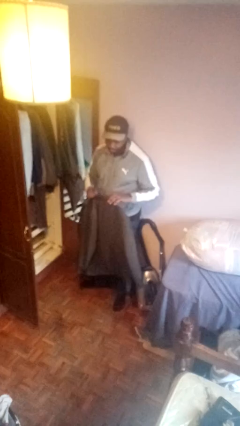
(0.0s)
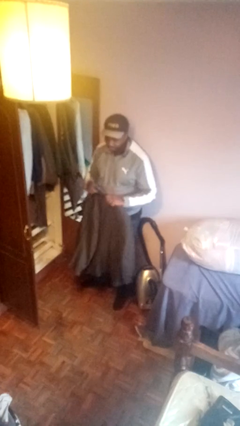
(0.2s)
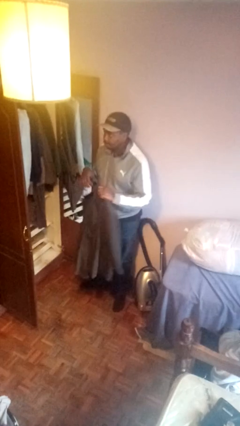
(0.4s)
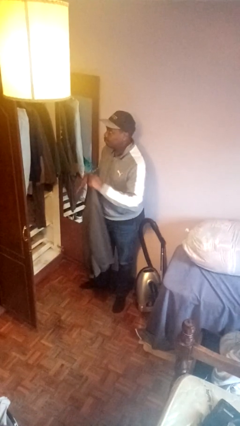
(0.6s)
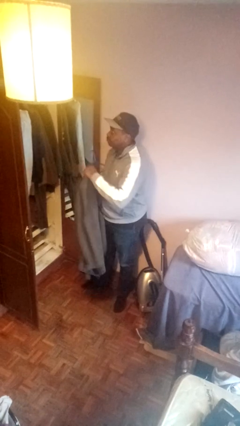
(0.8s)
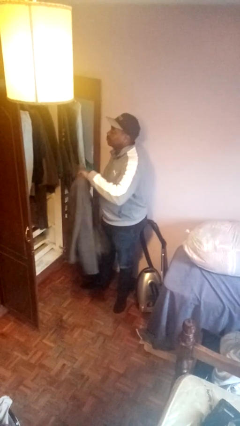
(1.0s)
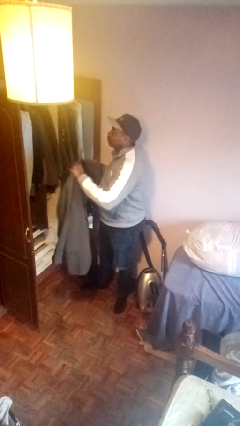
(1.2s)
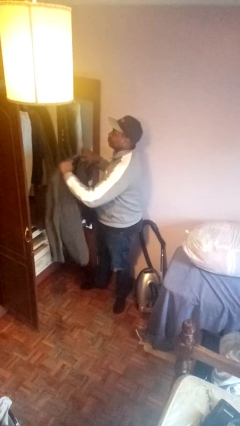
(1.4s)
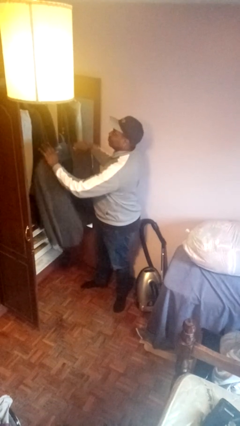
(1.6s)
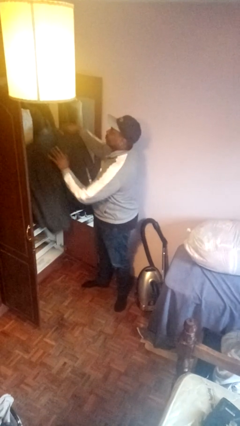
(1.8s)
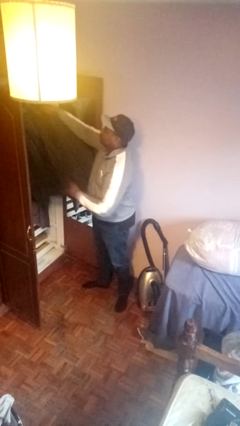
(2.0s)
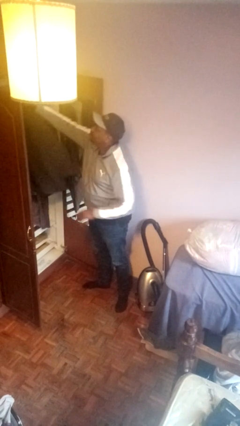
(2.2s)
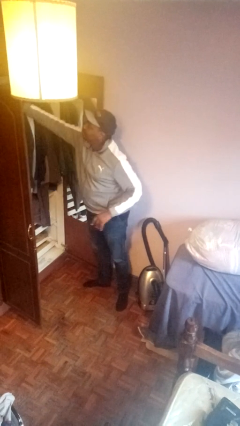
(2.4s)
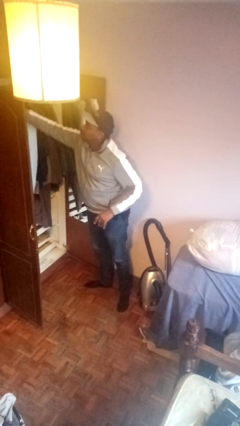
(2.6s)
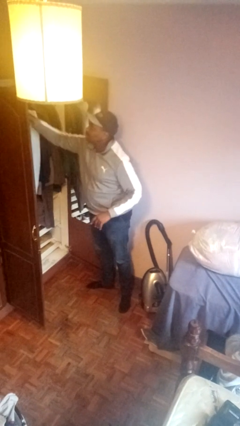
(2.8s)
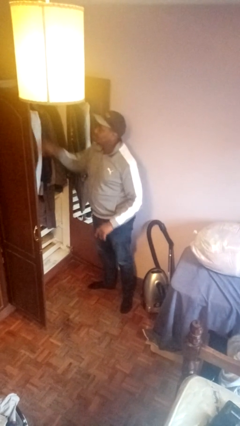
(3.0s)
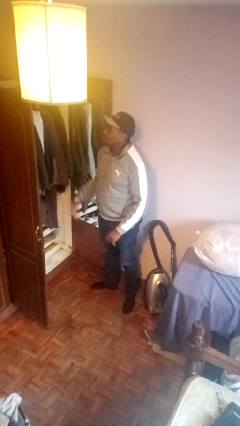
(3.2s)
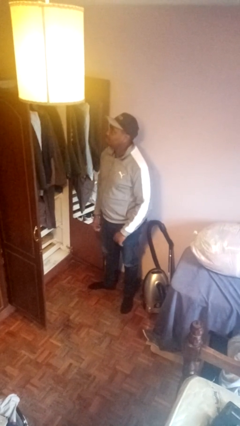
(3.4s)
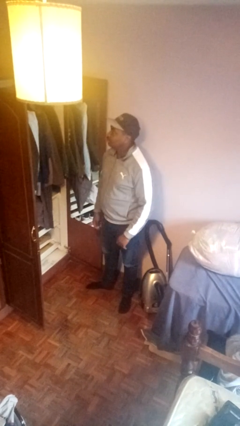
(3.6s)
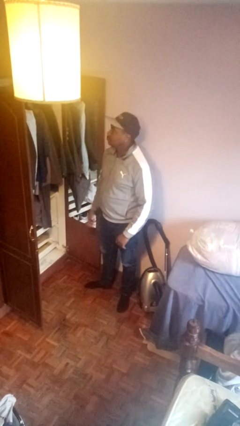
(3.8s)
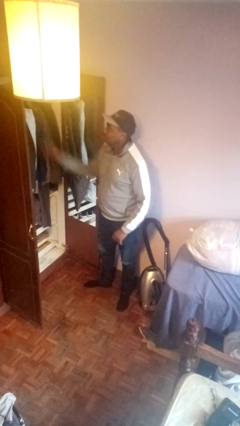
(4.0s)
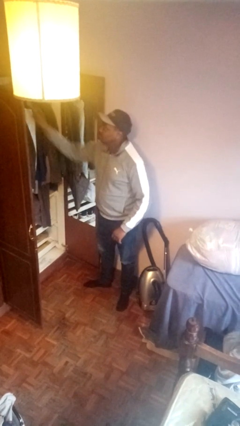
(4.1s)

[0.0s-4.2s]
person puts clothes into closet

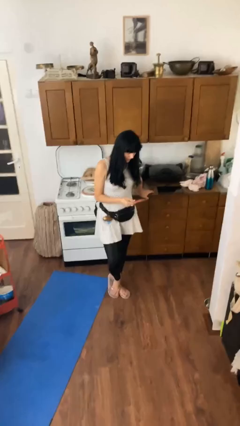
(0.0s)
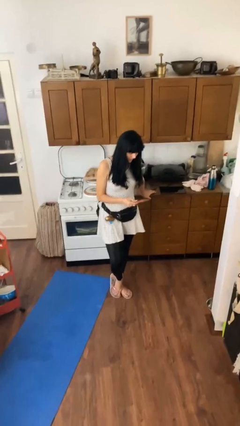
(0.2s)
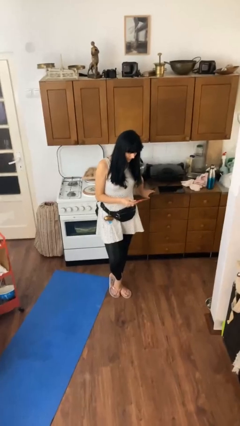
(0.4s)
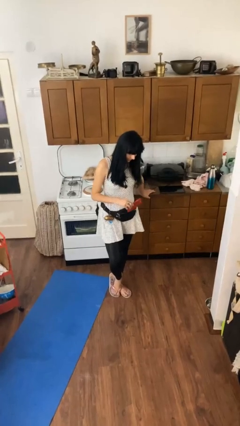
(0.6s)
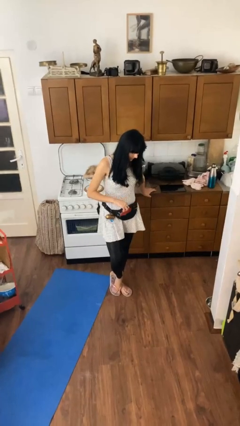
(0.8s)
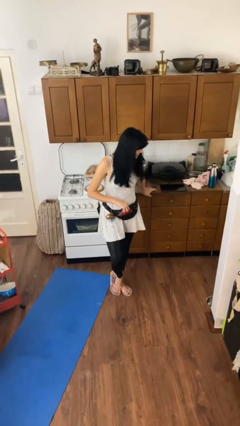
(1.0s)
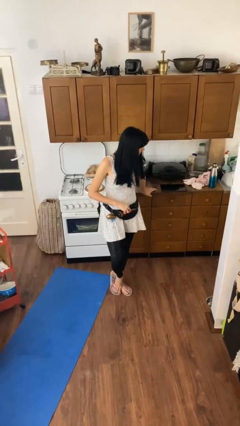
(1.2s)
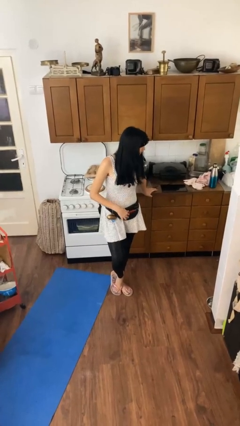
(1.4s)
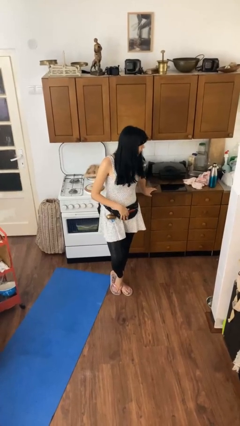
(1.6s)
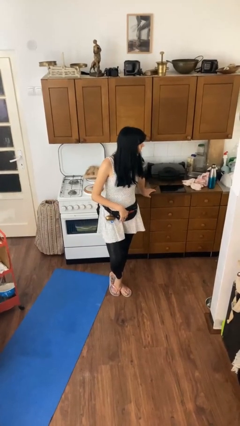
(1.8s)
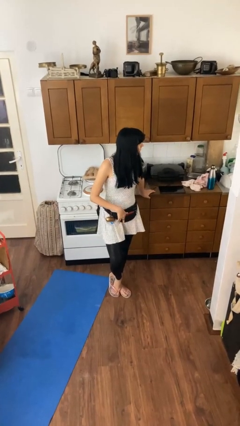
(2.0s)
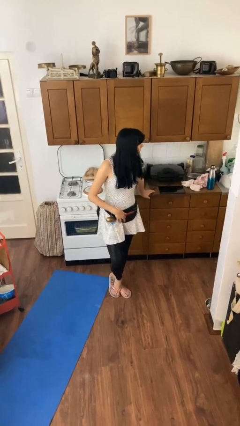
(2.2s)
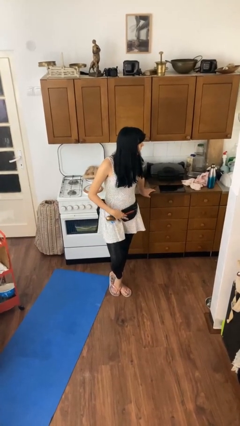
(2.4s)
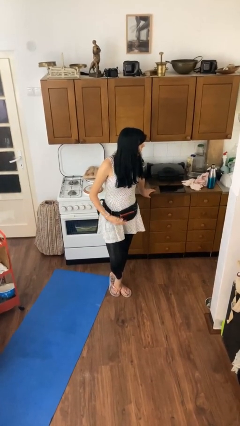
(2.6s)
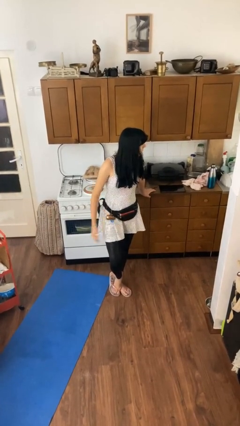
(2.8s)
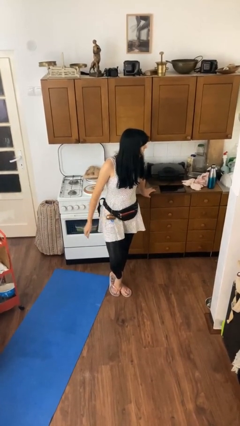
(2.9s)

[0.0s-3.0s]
person puts phone into pocket

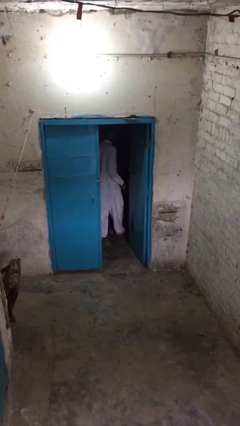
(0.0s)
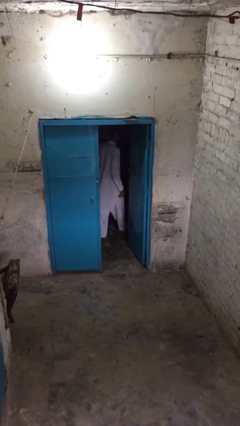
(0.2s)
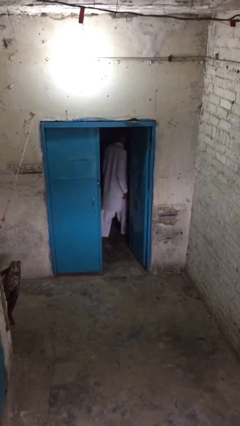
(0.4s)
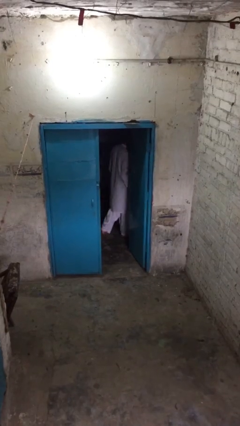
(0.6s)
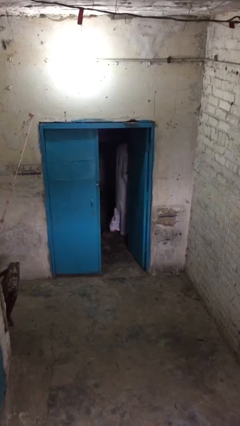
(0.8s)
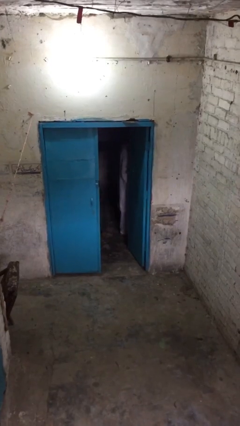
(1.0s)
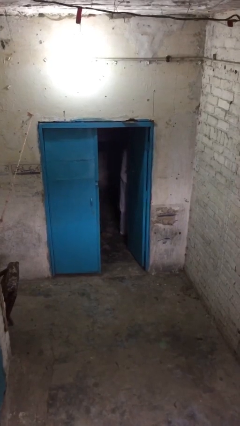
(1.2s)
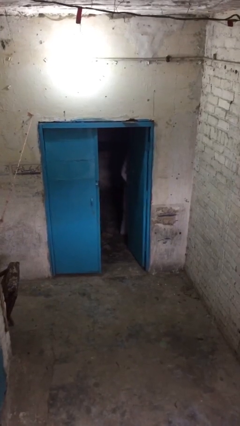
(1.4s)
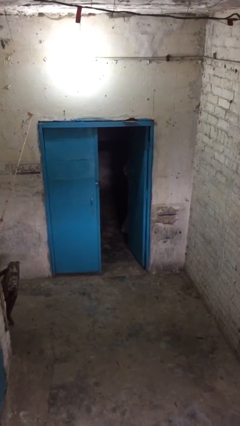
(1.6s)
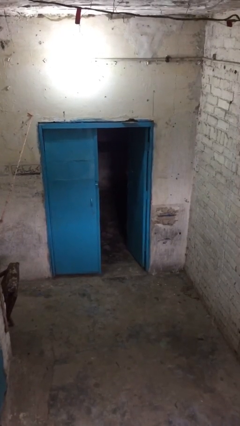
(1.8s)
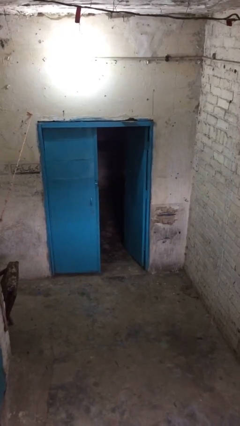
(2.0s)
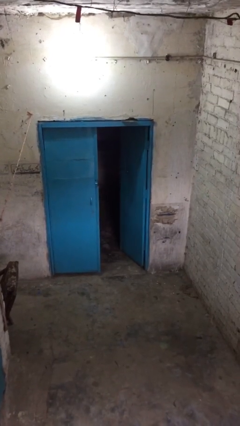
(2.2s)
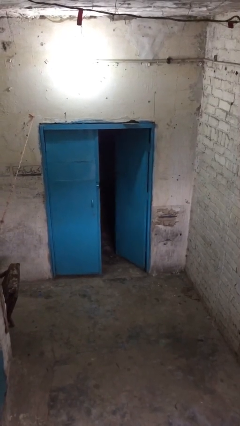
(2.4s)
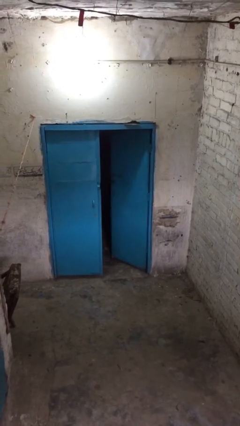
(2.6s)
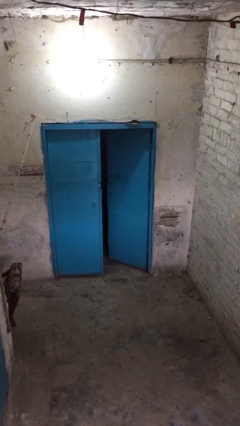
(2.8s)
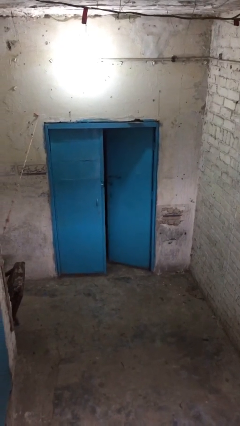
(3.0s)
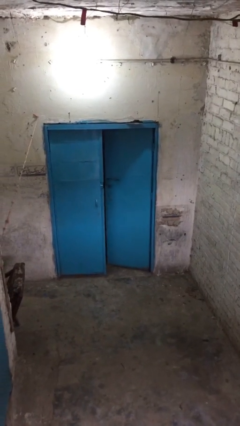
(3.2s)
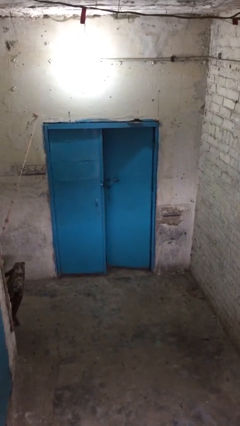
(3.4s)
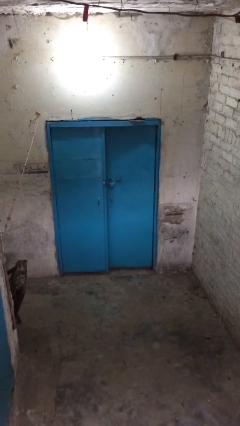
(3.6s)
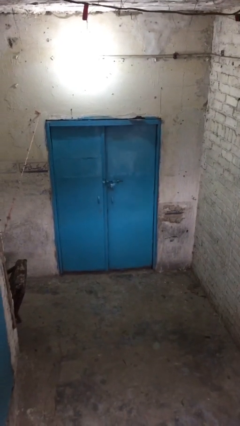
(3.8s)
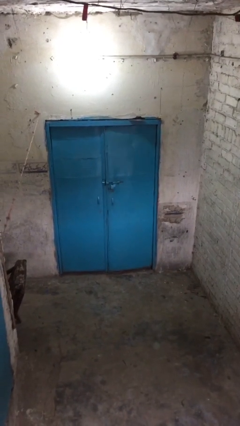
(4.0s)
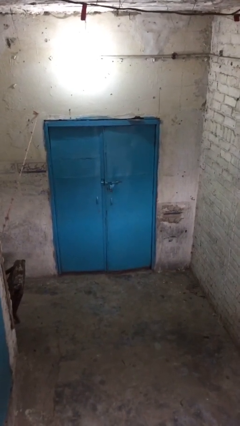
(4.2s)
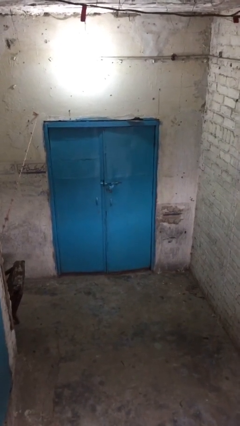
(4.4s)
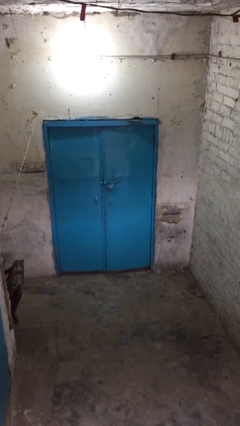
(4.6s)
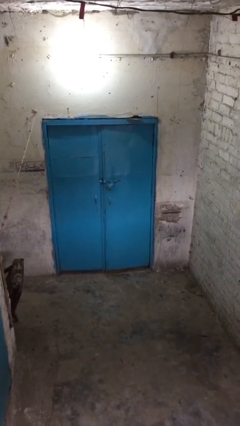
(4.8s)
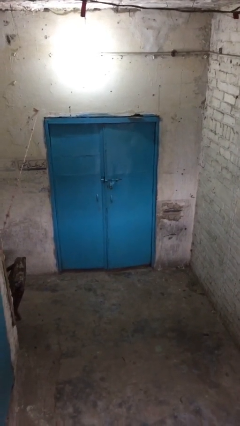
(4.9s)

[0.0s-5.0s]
person closes facility door

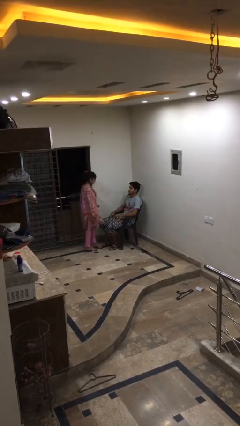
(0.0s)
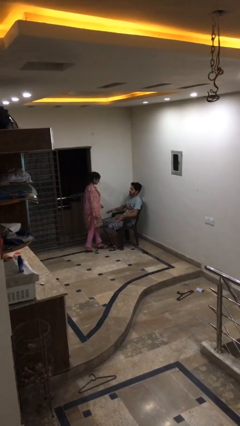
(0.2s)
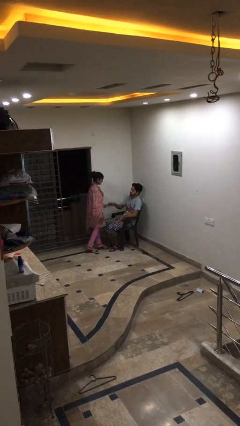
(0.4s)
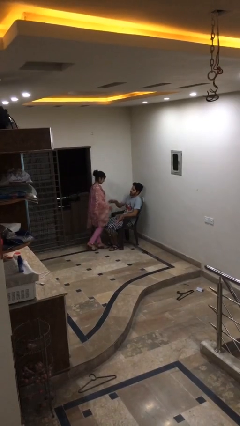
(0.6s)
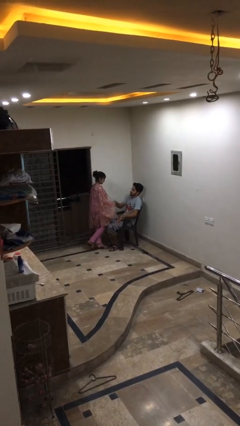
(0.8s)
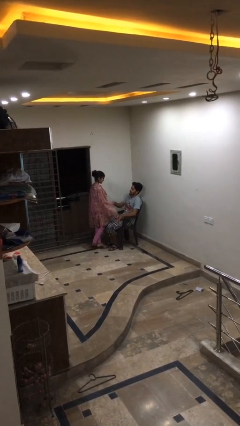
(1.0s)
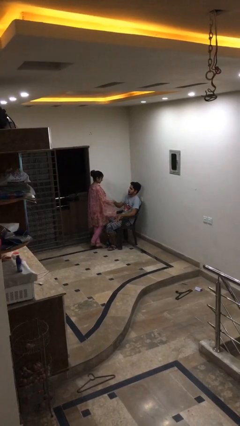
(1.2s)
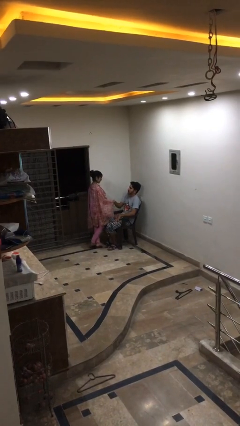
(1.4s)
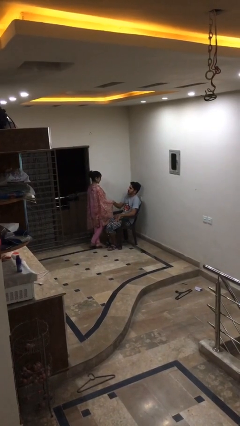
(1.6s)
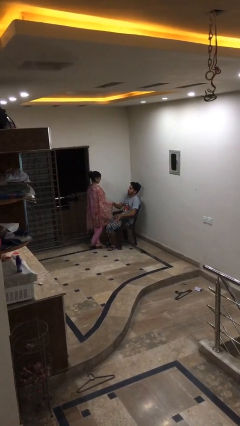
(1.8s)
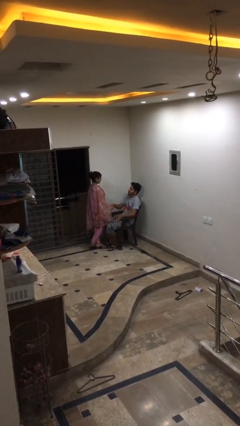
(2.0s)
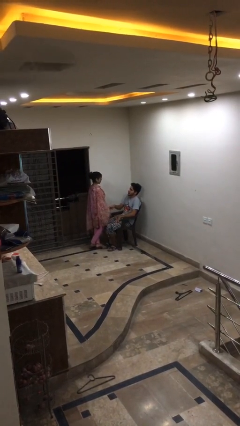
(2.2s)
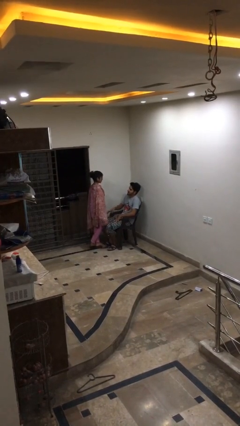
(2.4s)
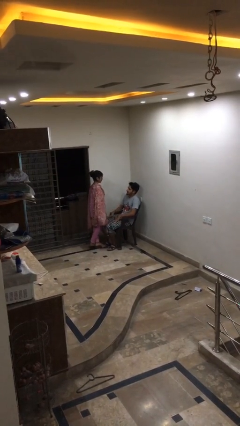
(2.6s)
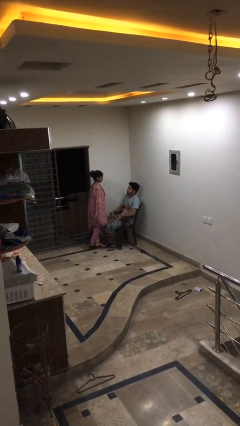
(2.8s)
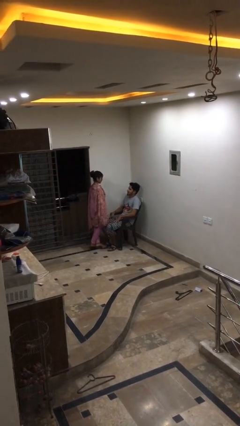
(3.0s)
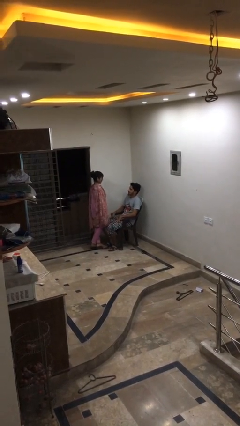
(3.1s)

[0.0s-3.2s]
person shakes hand

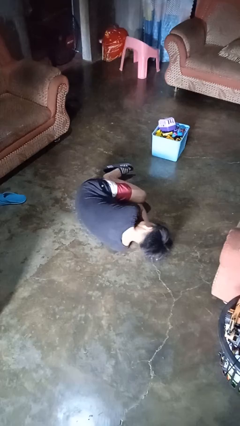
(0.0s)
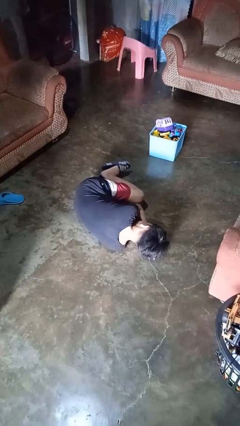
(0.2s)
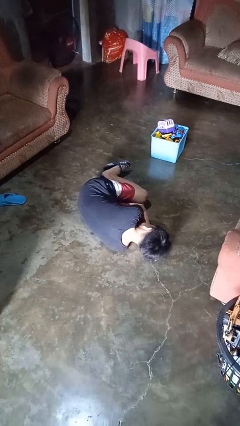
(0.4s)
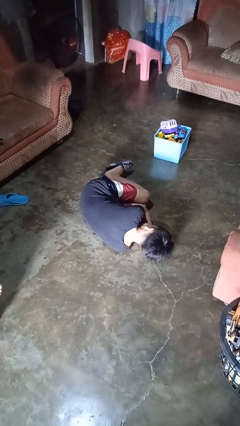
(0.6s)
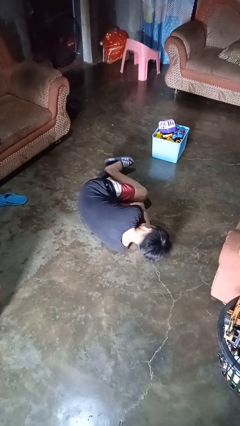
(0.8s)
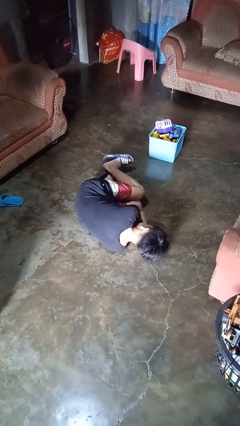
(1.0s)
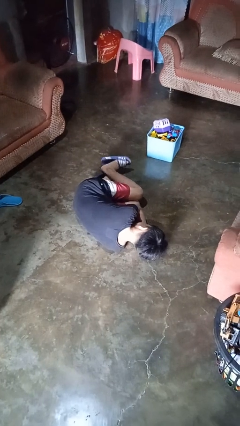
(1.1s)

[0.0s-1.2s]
person lies down on floor

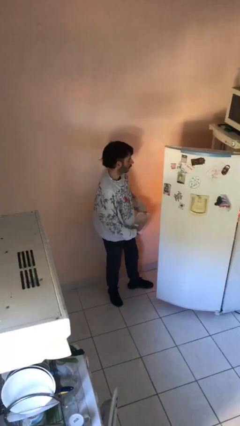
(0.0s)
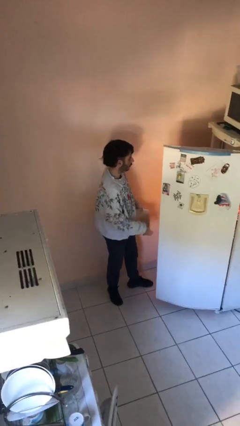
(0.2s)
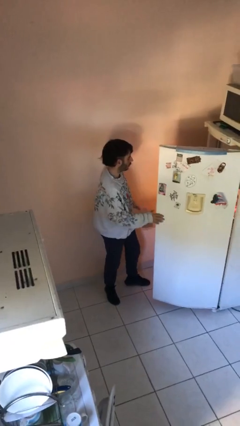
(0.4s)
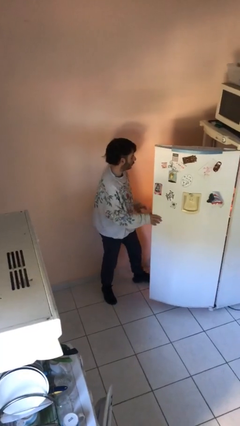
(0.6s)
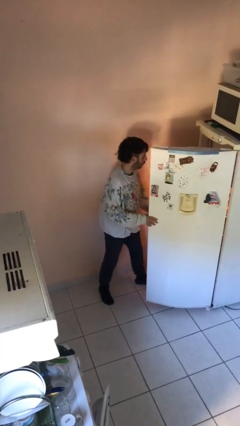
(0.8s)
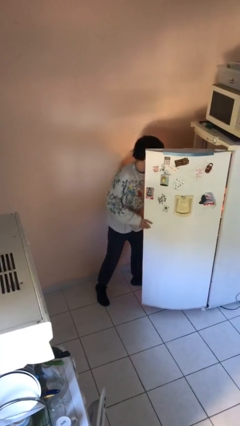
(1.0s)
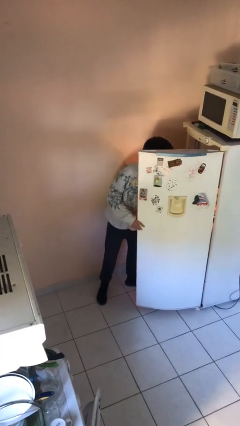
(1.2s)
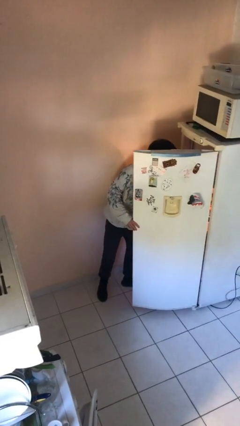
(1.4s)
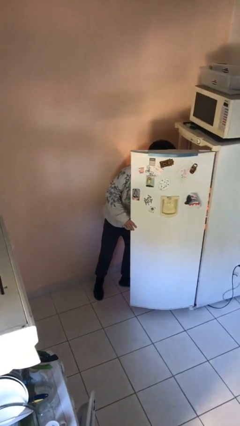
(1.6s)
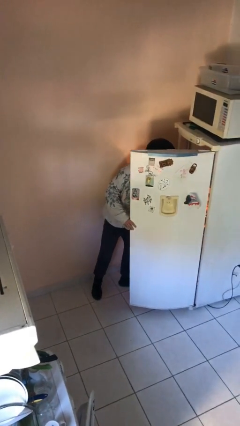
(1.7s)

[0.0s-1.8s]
person puts object into refrigerator
